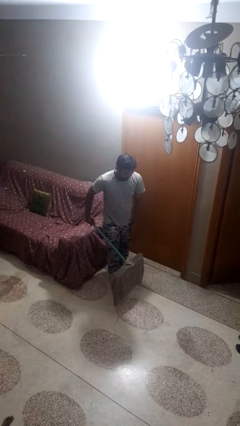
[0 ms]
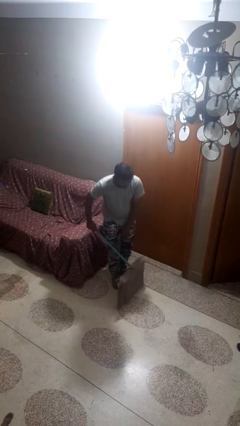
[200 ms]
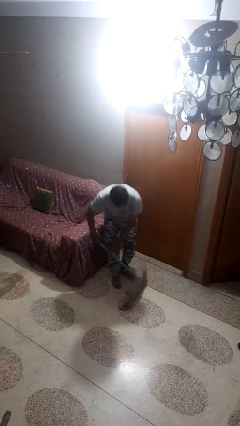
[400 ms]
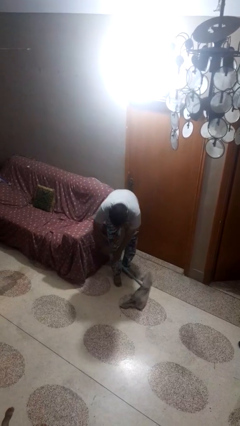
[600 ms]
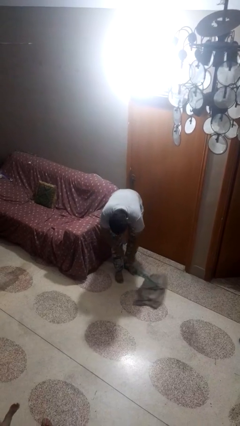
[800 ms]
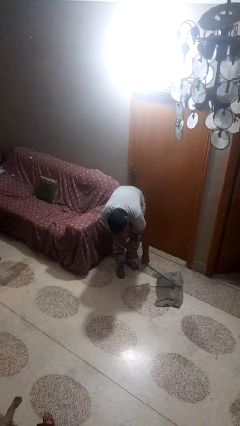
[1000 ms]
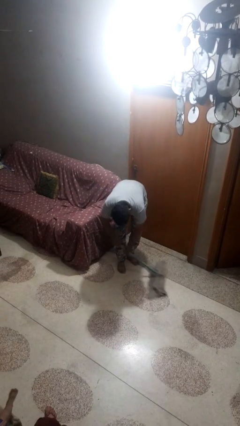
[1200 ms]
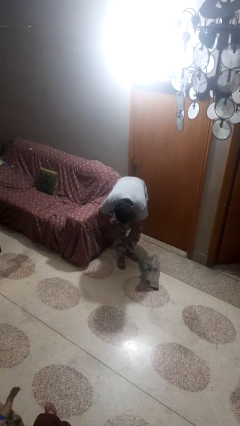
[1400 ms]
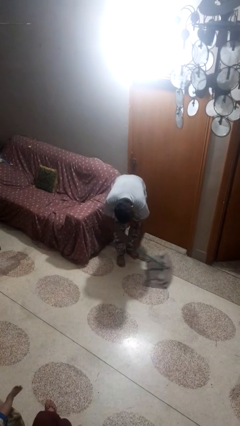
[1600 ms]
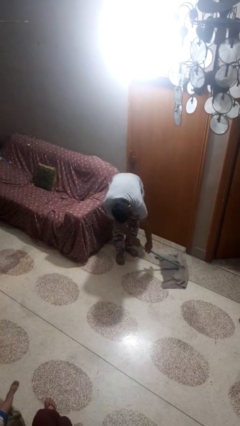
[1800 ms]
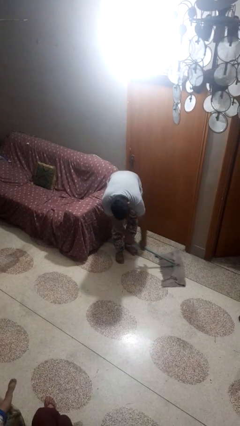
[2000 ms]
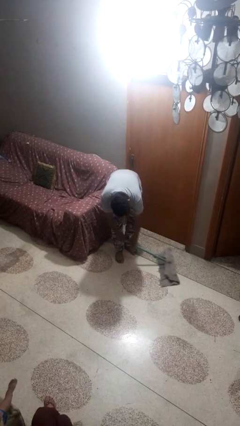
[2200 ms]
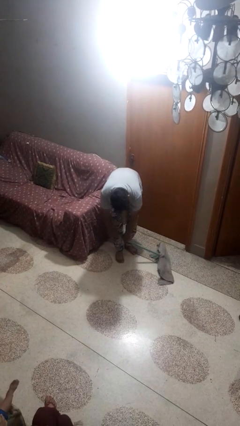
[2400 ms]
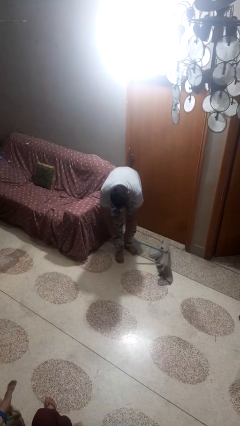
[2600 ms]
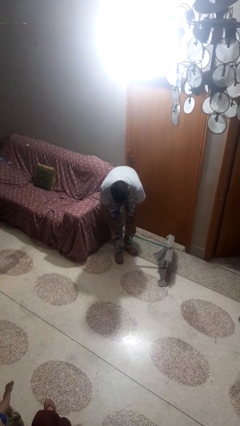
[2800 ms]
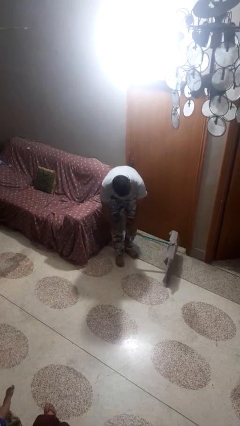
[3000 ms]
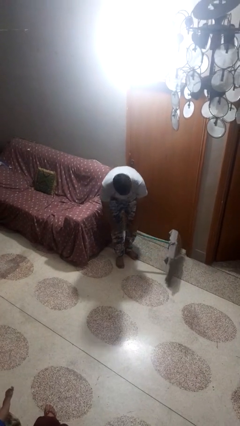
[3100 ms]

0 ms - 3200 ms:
person mops

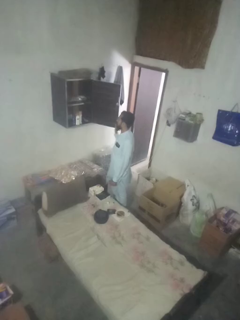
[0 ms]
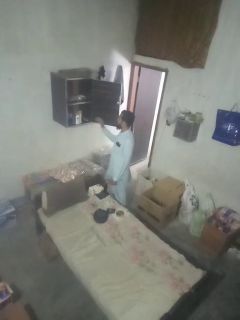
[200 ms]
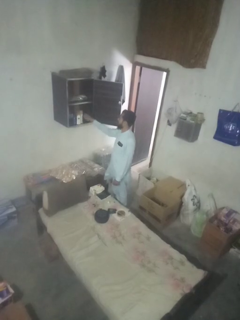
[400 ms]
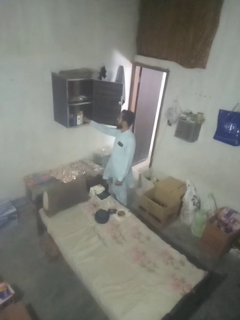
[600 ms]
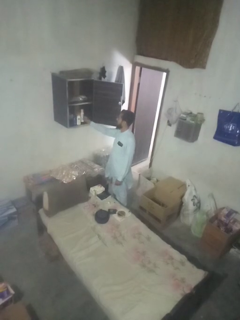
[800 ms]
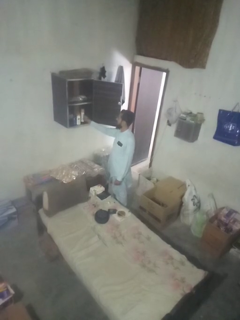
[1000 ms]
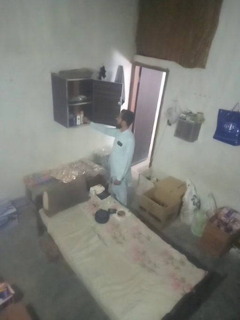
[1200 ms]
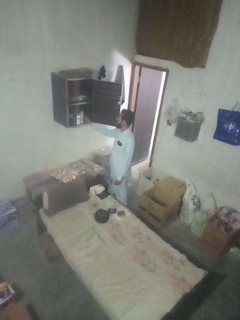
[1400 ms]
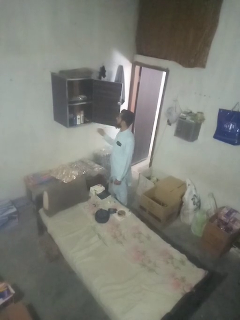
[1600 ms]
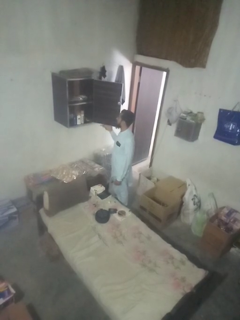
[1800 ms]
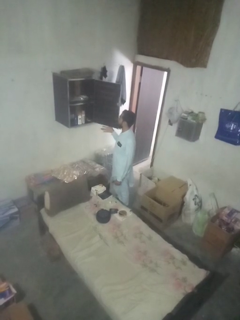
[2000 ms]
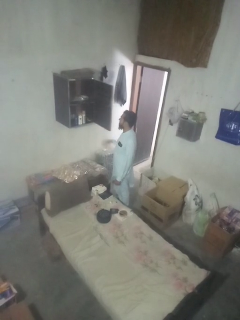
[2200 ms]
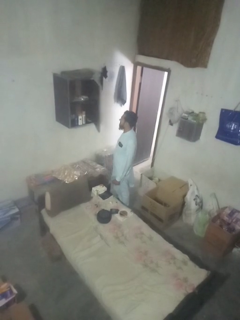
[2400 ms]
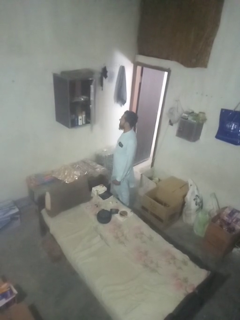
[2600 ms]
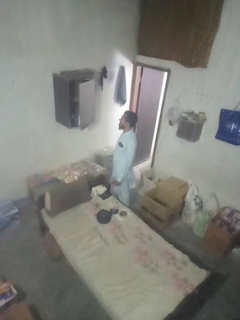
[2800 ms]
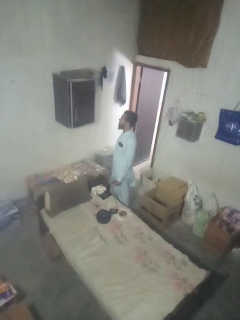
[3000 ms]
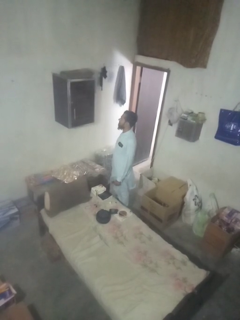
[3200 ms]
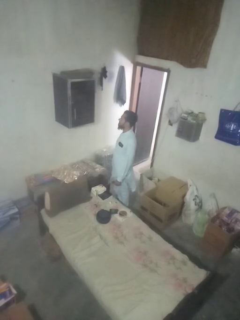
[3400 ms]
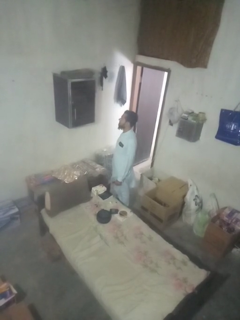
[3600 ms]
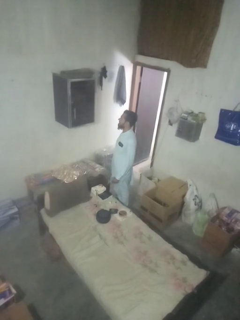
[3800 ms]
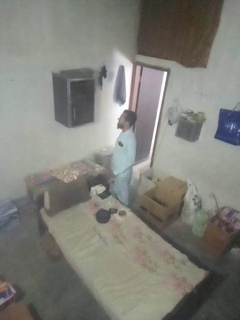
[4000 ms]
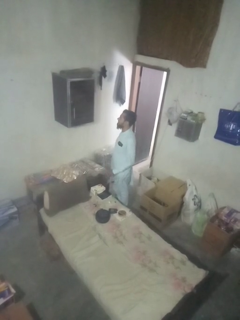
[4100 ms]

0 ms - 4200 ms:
person closes dresser drawer

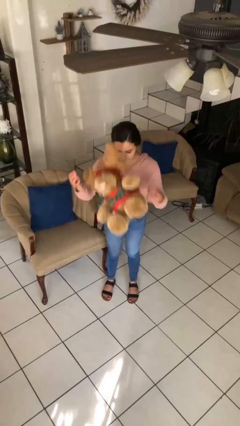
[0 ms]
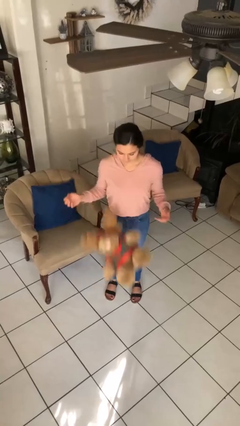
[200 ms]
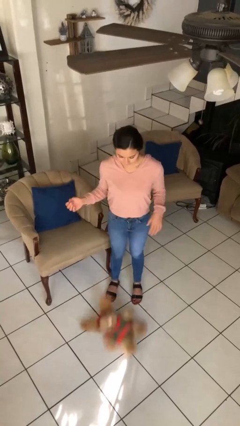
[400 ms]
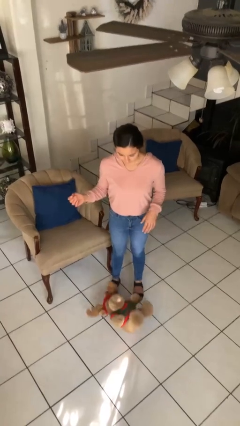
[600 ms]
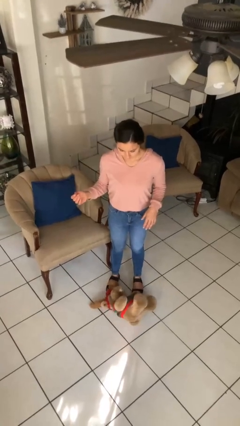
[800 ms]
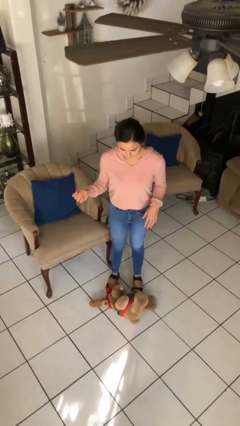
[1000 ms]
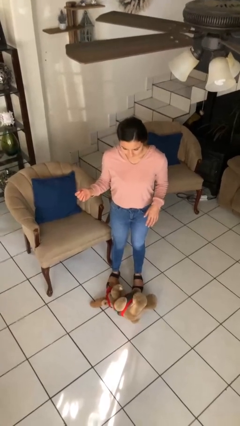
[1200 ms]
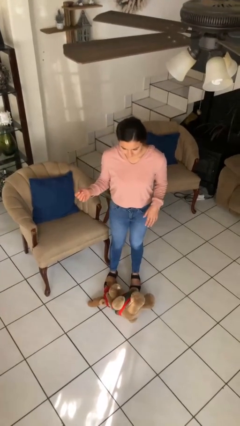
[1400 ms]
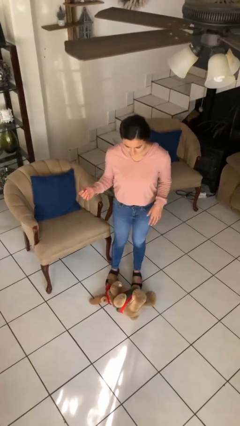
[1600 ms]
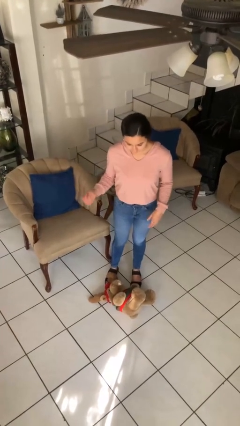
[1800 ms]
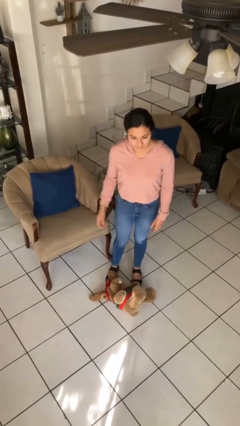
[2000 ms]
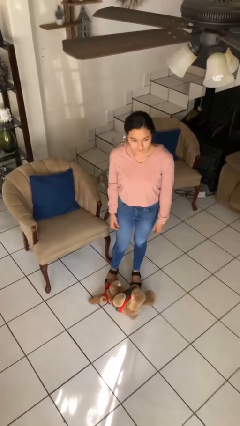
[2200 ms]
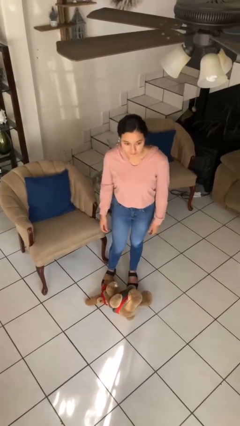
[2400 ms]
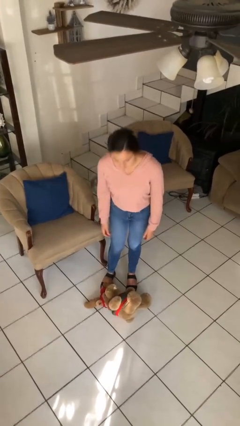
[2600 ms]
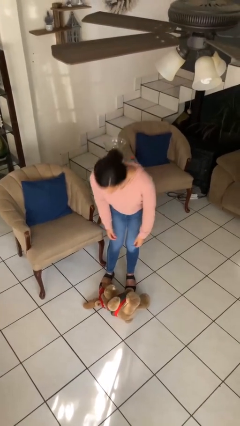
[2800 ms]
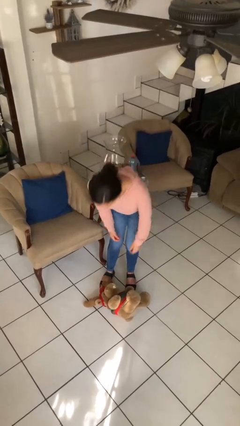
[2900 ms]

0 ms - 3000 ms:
person drops object

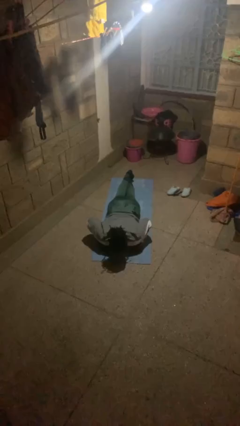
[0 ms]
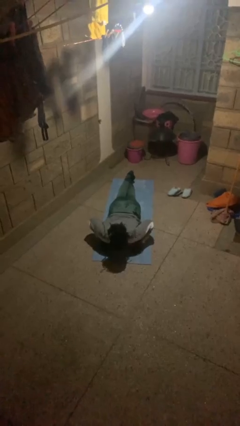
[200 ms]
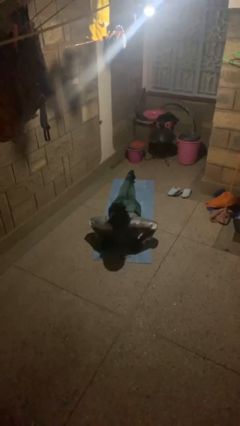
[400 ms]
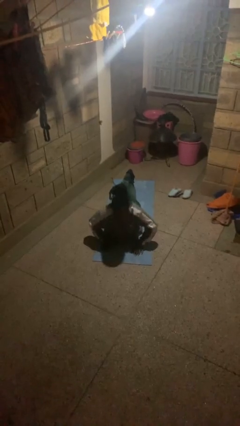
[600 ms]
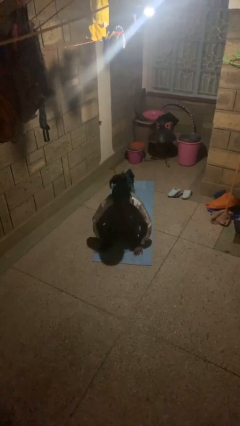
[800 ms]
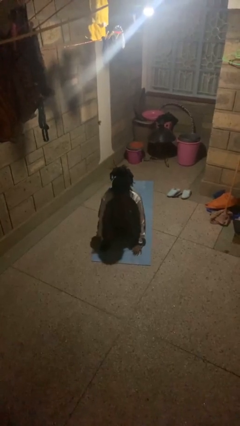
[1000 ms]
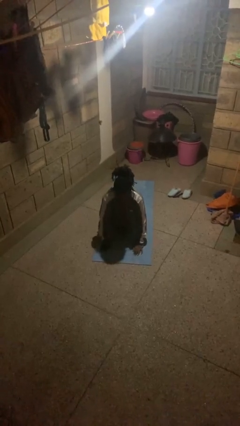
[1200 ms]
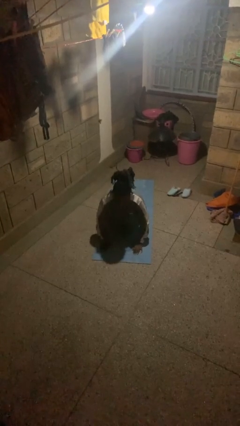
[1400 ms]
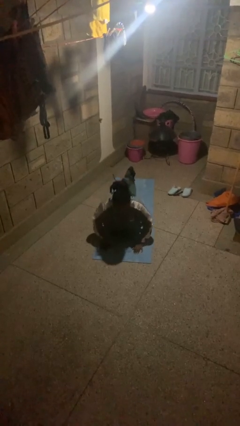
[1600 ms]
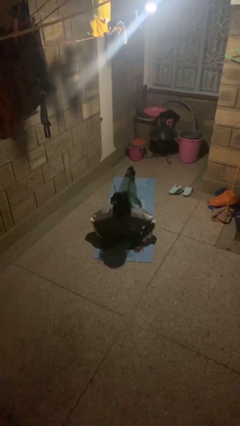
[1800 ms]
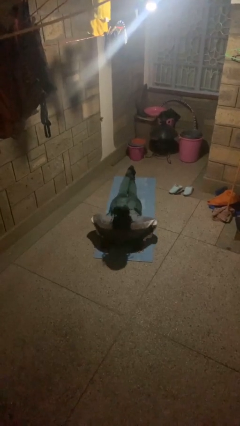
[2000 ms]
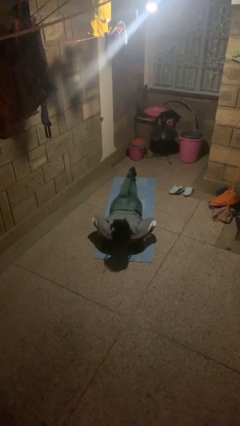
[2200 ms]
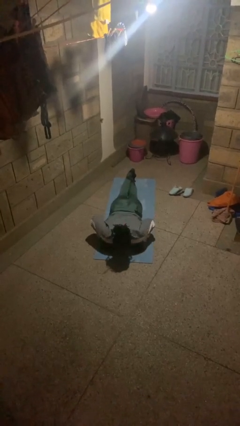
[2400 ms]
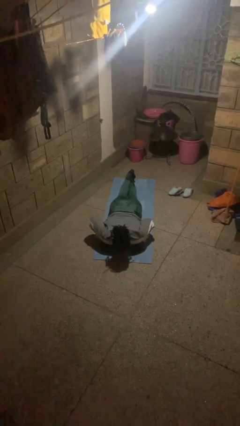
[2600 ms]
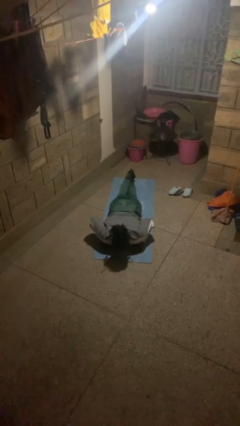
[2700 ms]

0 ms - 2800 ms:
person exercises with pushup

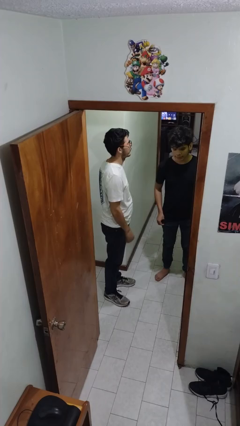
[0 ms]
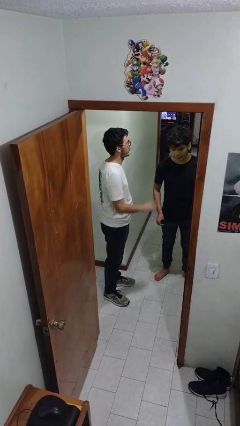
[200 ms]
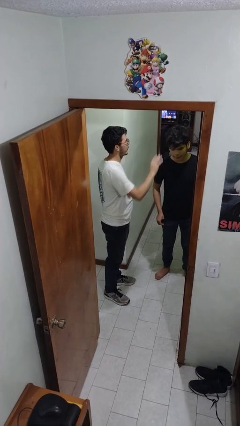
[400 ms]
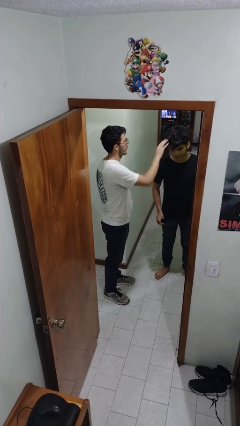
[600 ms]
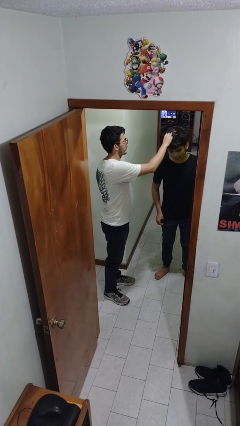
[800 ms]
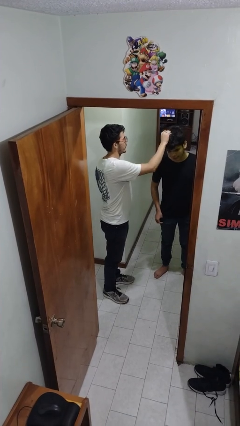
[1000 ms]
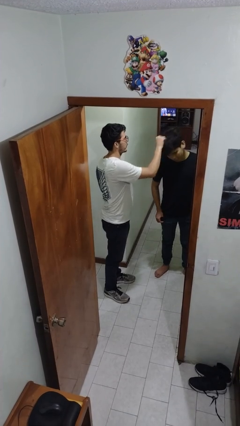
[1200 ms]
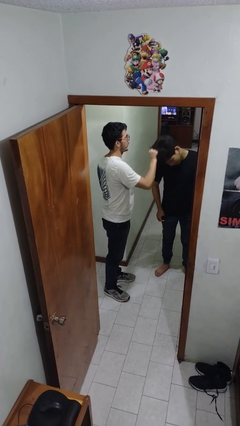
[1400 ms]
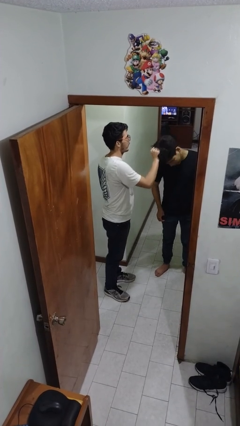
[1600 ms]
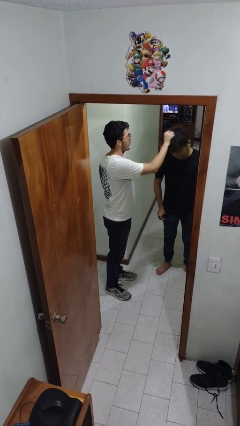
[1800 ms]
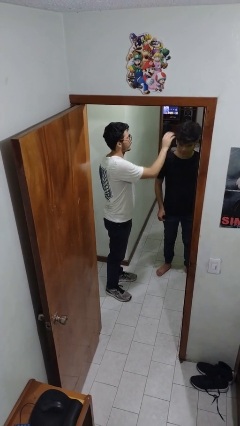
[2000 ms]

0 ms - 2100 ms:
person grabs person by hair

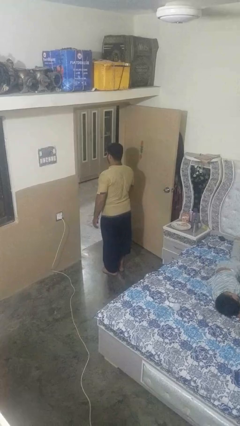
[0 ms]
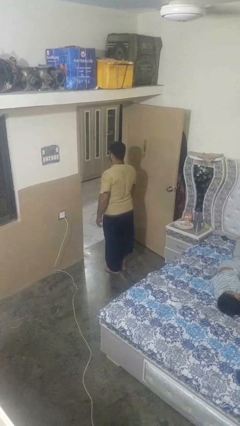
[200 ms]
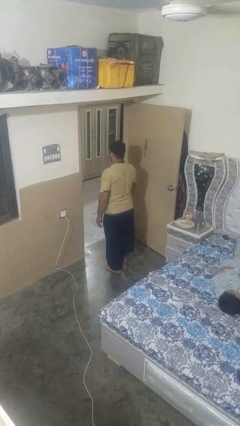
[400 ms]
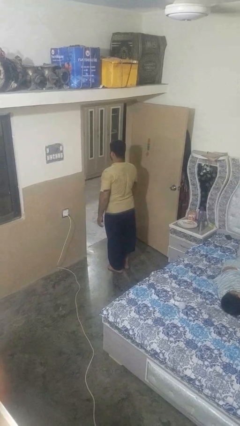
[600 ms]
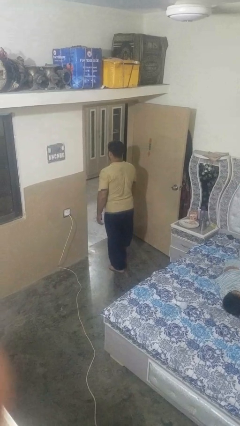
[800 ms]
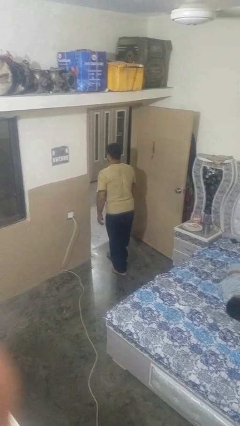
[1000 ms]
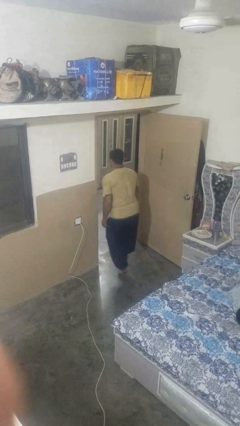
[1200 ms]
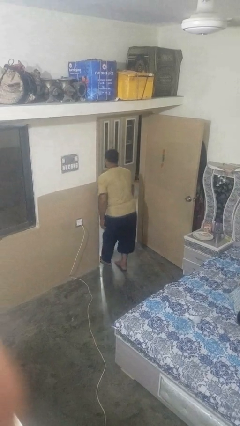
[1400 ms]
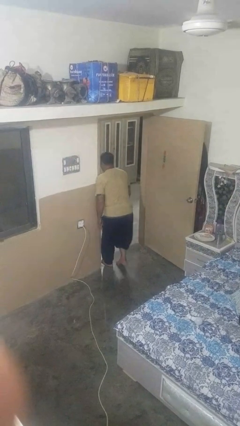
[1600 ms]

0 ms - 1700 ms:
person bumps into wall

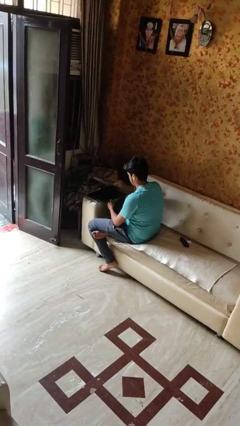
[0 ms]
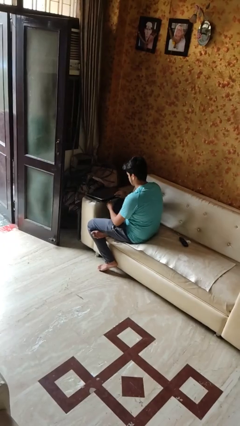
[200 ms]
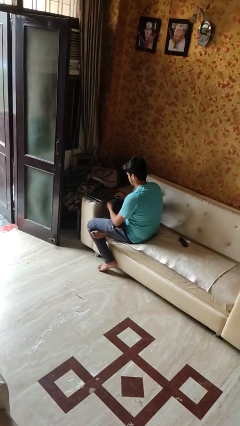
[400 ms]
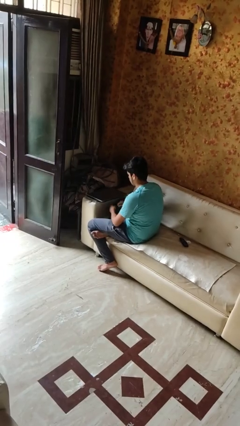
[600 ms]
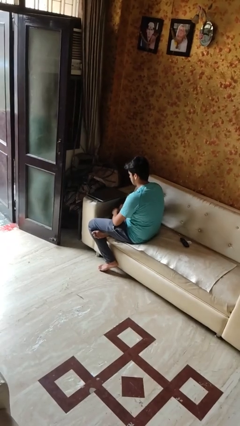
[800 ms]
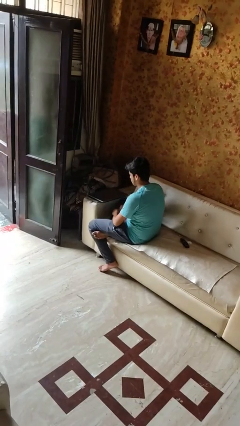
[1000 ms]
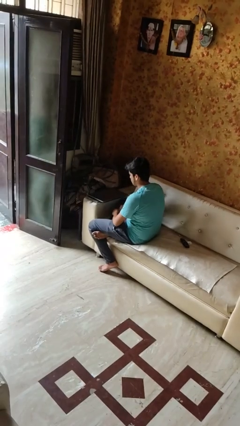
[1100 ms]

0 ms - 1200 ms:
person closes laptop

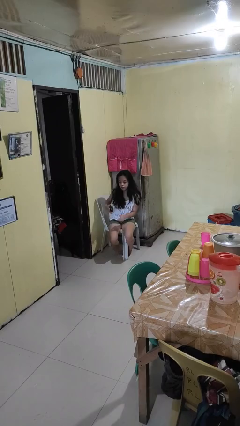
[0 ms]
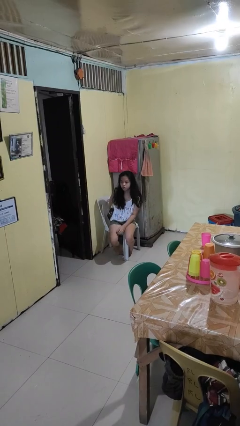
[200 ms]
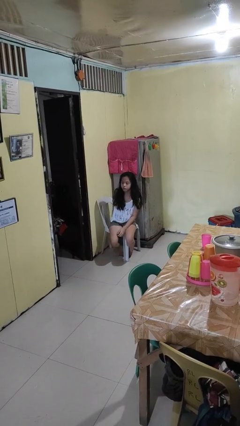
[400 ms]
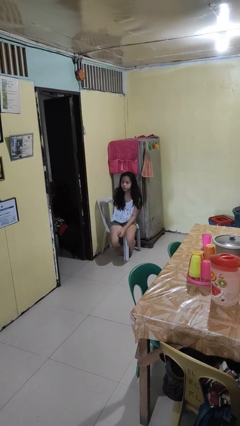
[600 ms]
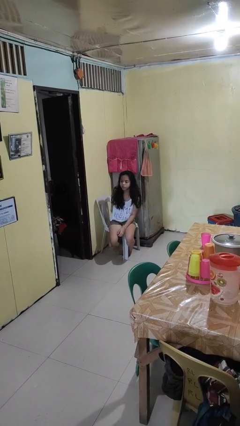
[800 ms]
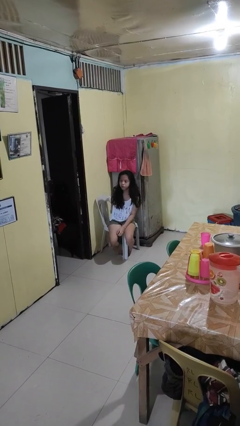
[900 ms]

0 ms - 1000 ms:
person puts phone into pocket
